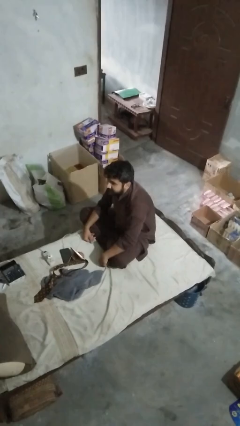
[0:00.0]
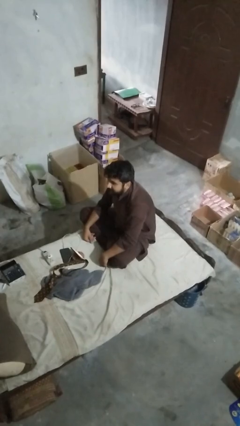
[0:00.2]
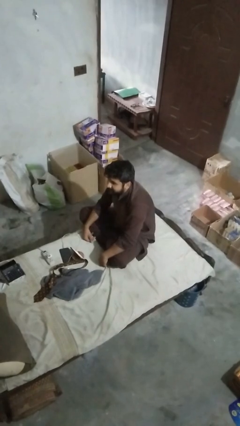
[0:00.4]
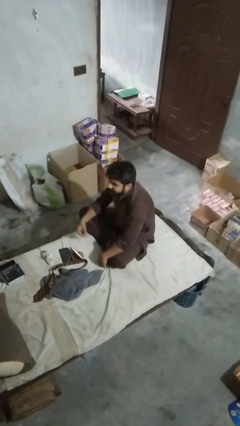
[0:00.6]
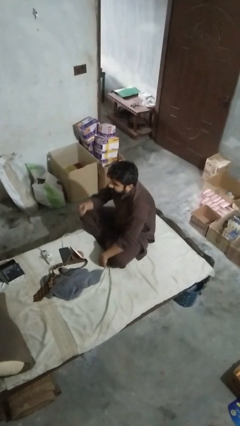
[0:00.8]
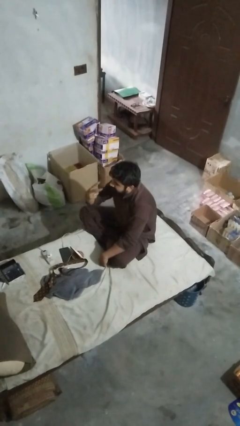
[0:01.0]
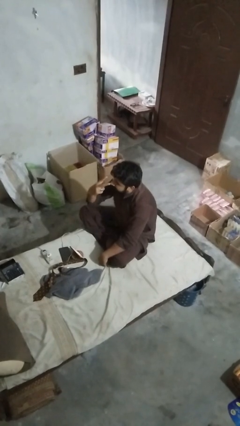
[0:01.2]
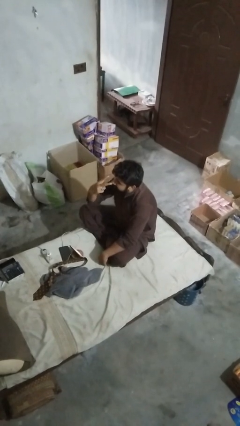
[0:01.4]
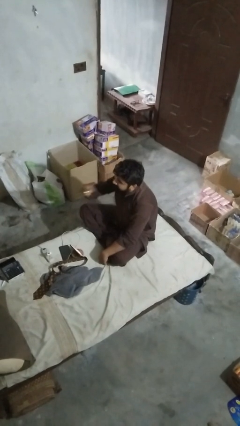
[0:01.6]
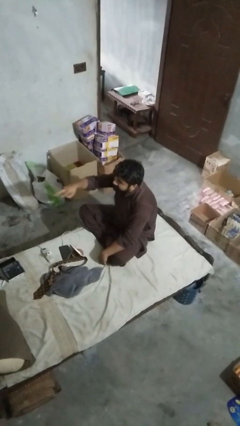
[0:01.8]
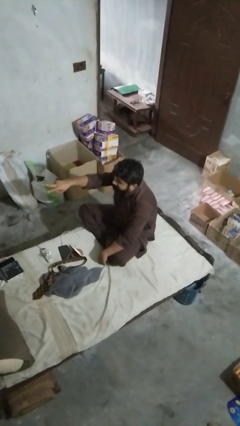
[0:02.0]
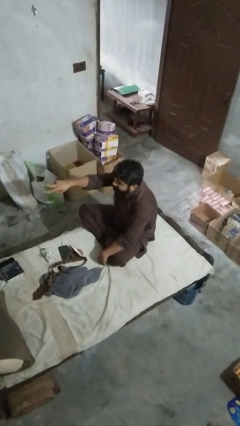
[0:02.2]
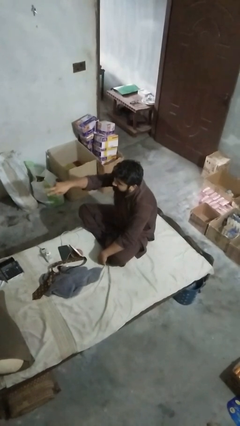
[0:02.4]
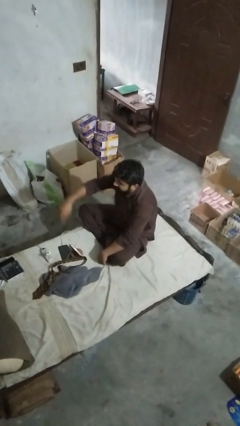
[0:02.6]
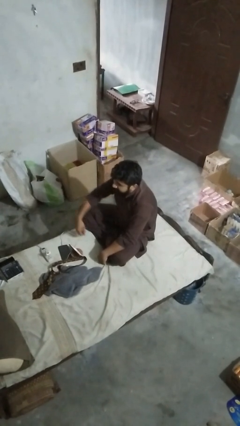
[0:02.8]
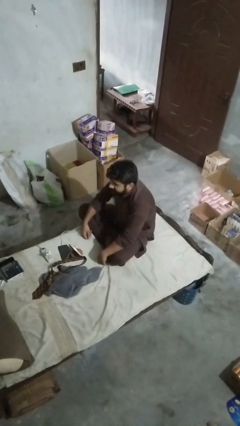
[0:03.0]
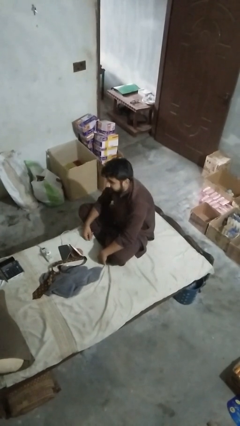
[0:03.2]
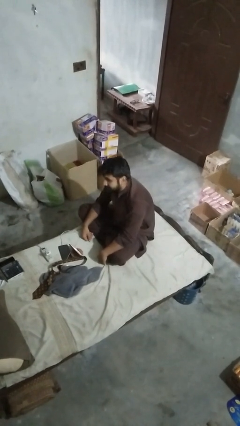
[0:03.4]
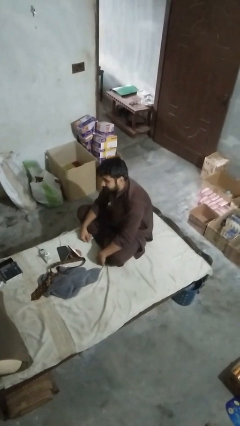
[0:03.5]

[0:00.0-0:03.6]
person gestures watch closely

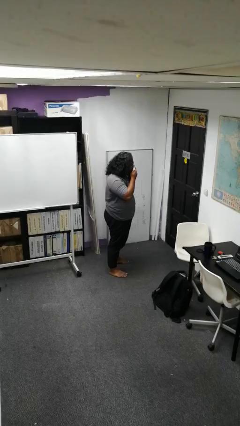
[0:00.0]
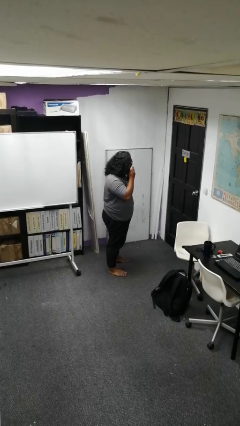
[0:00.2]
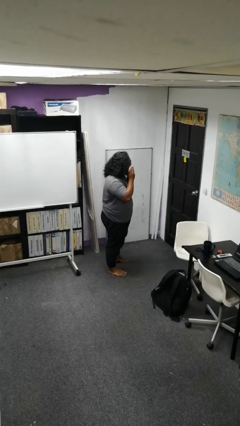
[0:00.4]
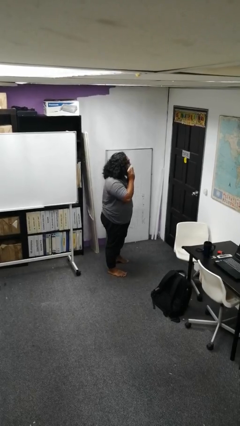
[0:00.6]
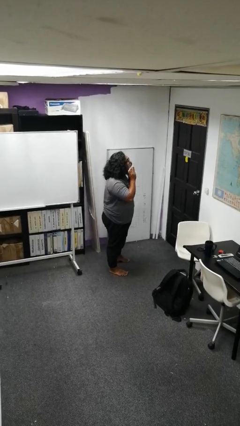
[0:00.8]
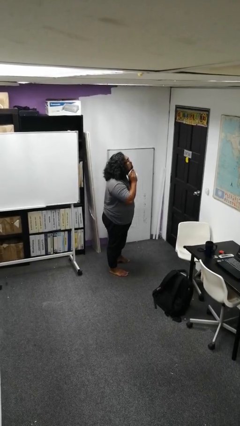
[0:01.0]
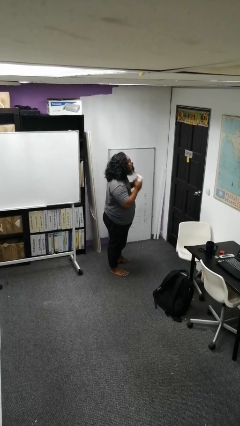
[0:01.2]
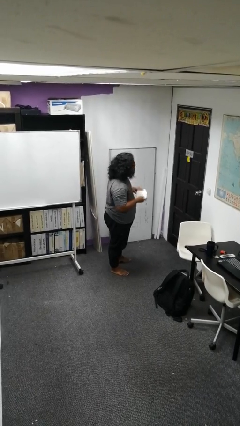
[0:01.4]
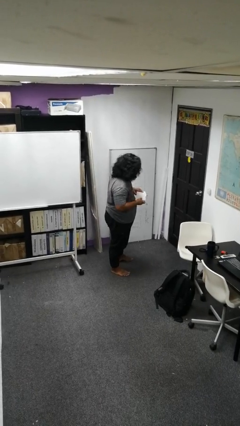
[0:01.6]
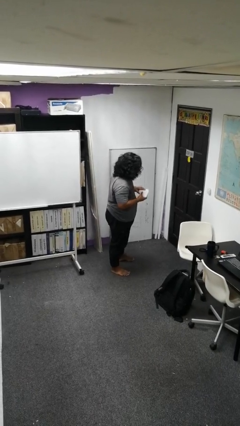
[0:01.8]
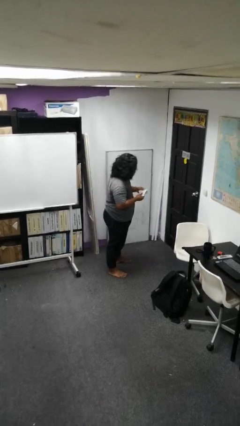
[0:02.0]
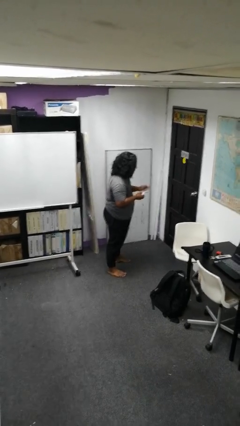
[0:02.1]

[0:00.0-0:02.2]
person wipes mouth with napkin

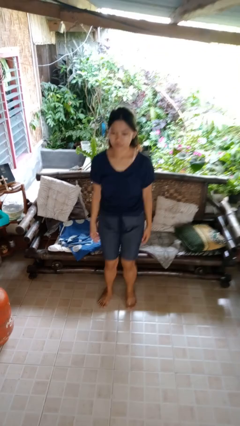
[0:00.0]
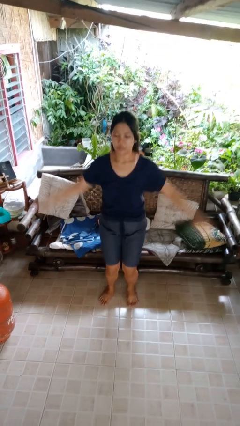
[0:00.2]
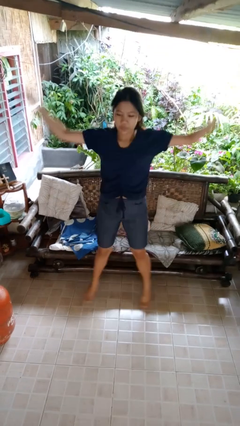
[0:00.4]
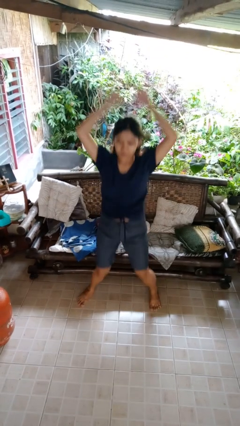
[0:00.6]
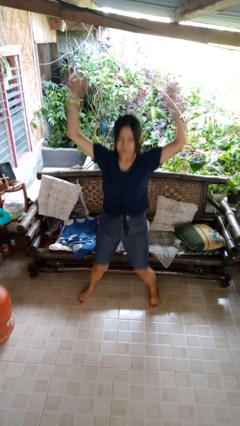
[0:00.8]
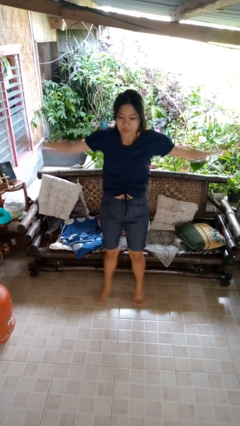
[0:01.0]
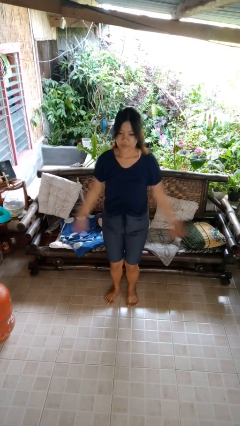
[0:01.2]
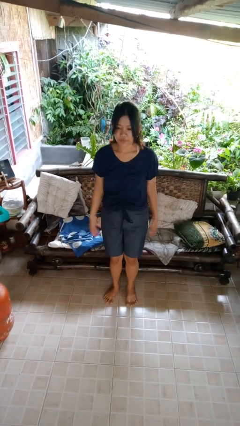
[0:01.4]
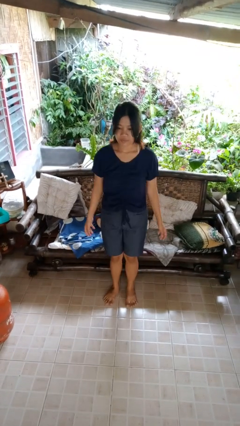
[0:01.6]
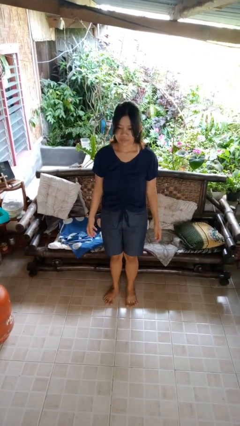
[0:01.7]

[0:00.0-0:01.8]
person exercises with jumping jacks

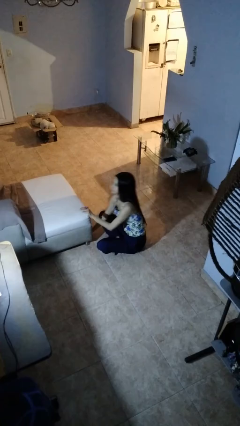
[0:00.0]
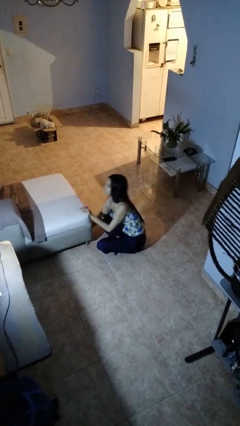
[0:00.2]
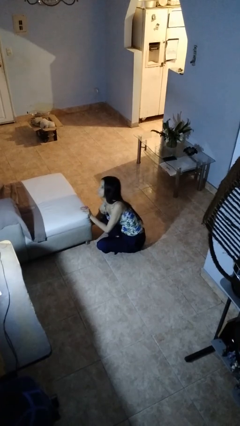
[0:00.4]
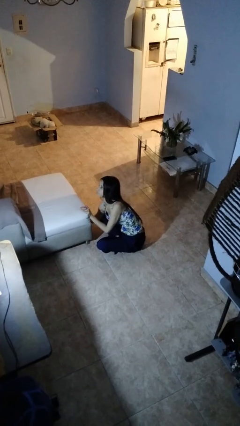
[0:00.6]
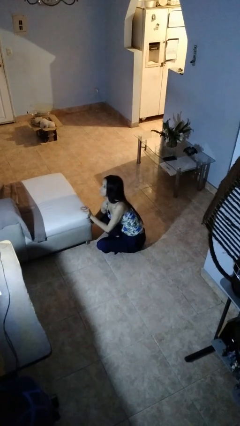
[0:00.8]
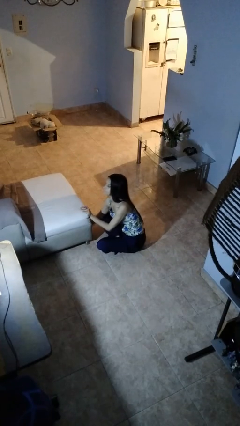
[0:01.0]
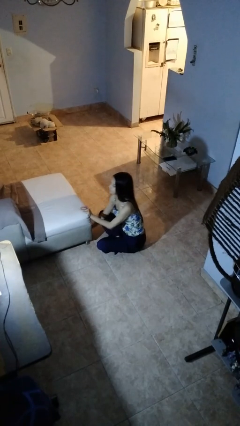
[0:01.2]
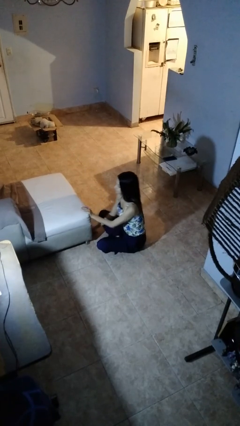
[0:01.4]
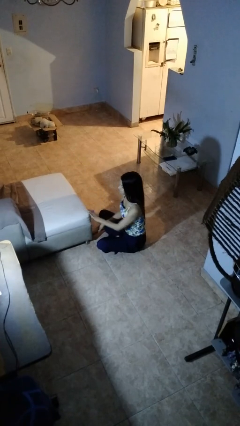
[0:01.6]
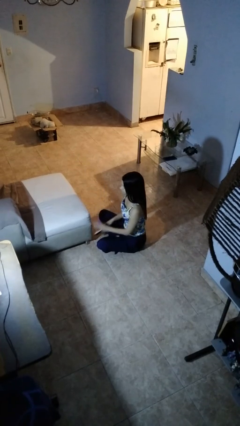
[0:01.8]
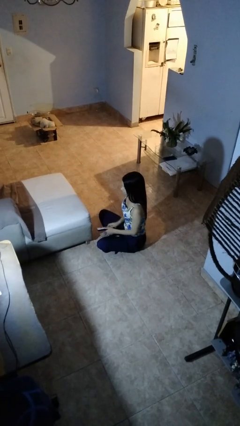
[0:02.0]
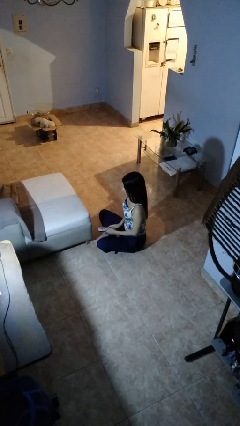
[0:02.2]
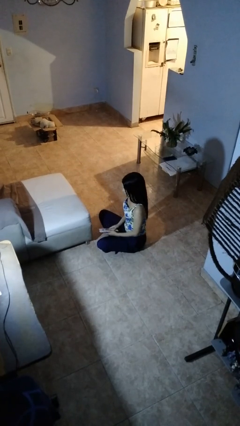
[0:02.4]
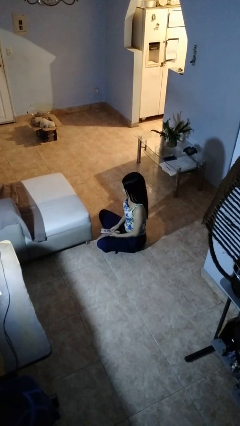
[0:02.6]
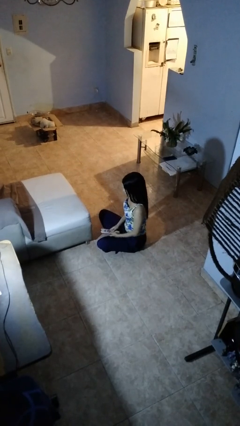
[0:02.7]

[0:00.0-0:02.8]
person searches under couch

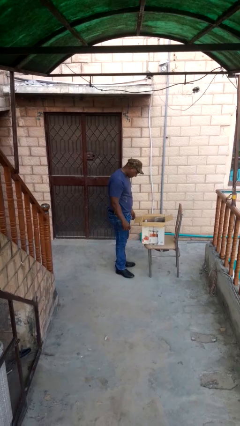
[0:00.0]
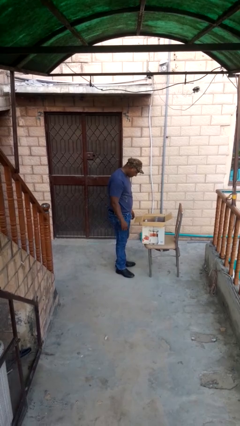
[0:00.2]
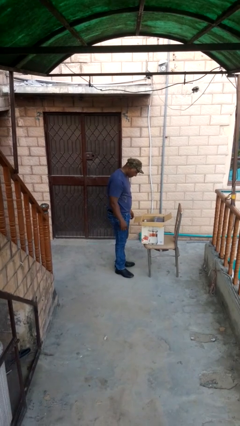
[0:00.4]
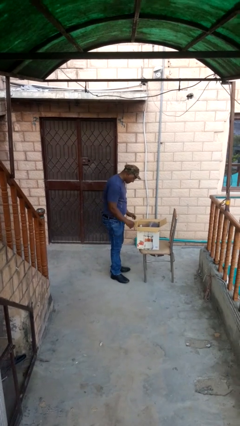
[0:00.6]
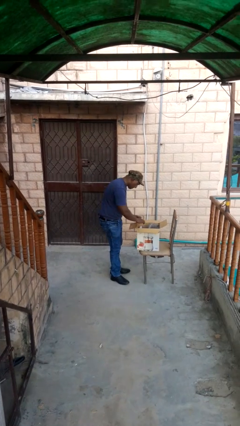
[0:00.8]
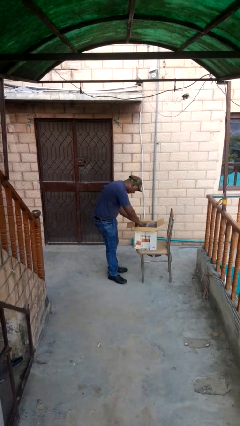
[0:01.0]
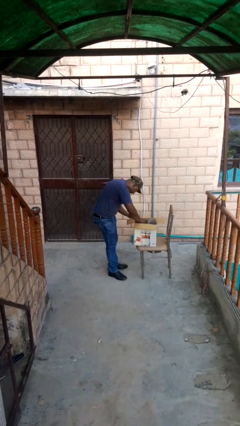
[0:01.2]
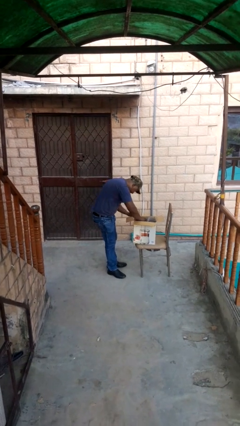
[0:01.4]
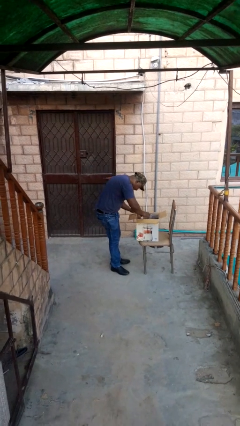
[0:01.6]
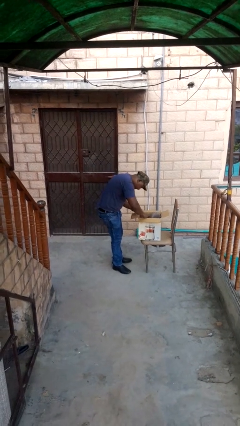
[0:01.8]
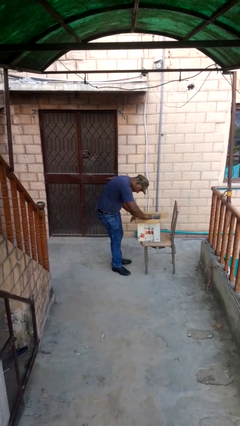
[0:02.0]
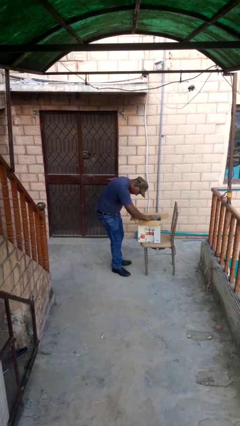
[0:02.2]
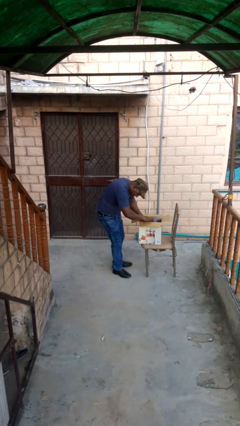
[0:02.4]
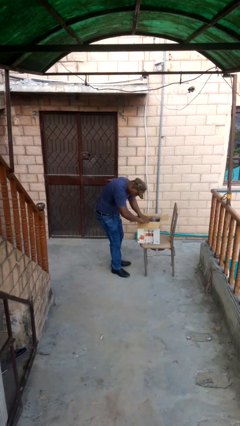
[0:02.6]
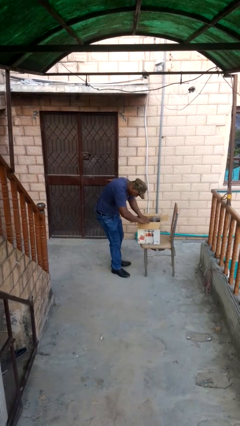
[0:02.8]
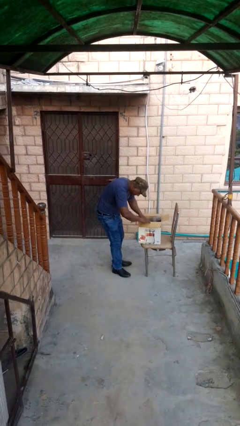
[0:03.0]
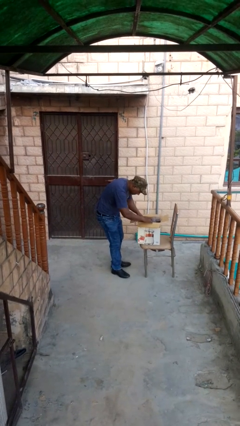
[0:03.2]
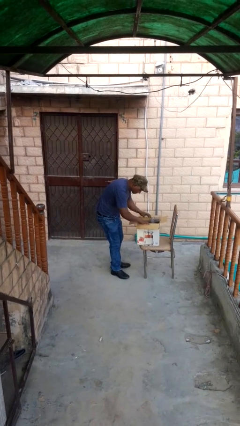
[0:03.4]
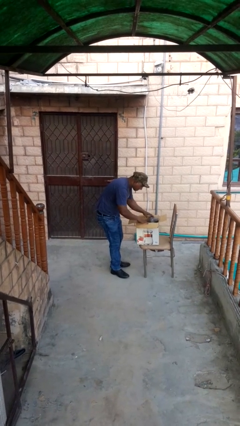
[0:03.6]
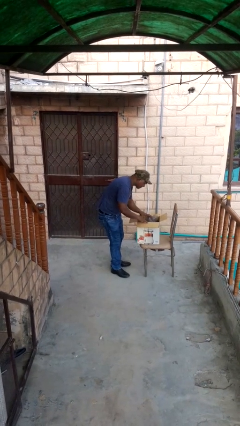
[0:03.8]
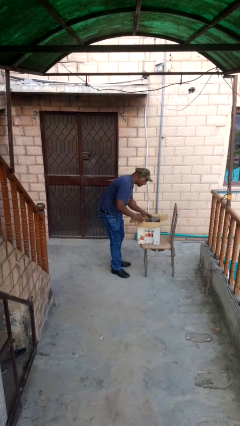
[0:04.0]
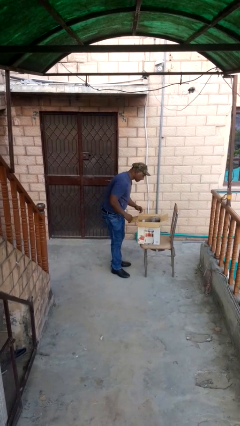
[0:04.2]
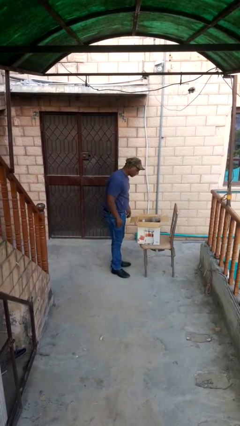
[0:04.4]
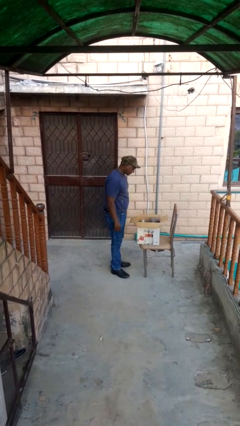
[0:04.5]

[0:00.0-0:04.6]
person searches in box

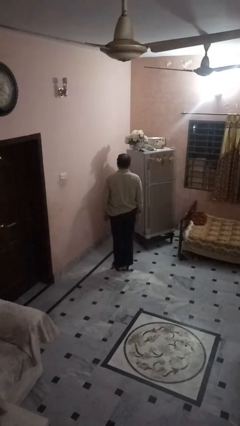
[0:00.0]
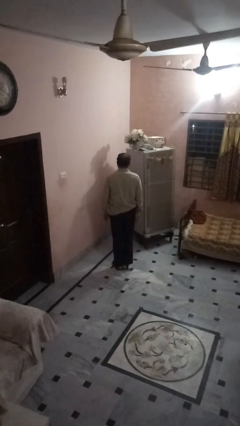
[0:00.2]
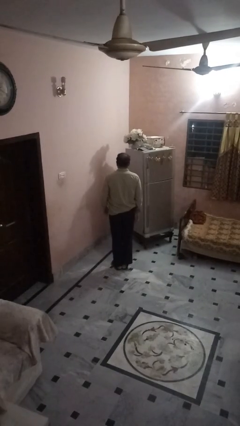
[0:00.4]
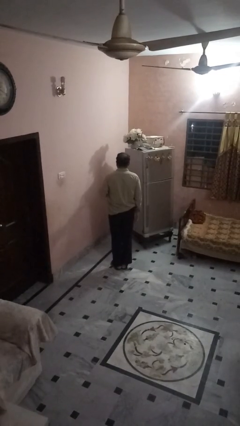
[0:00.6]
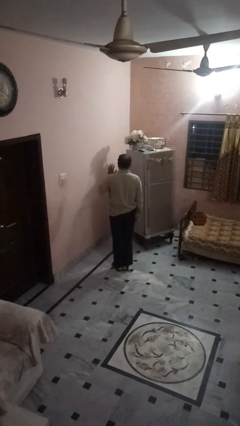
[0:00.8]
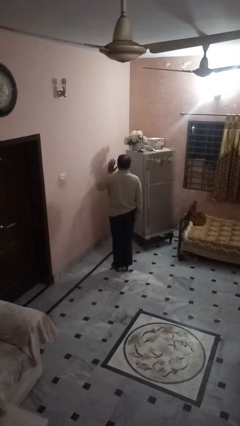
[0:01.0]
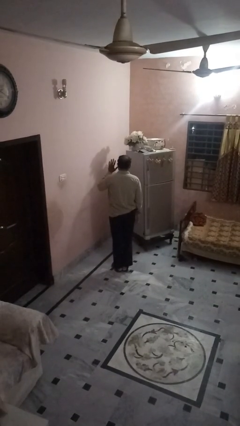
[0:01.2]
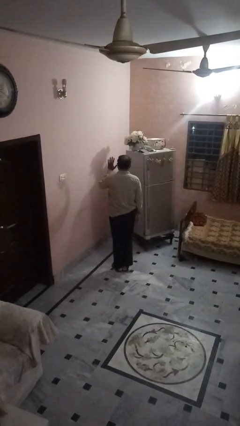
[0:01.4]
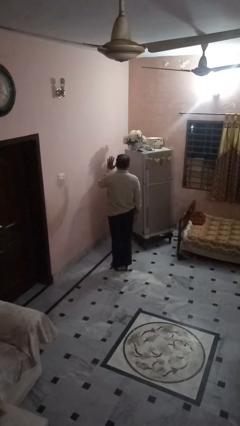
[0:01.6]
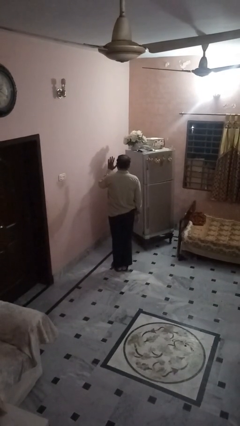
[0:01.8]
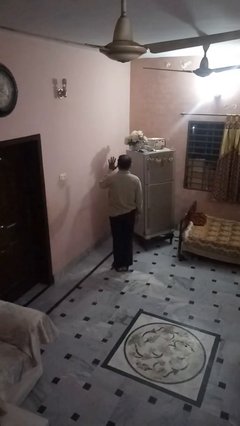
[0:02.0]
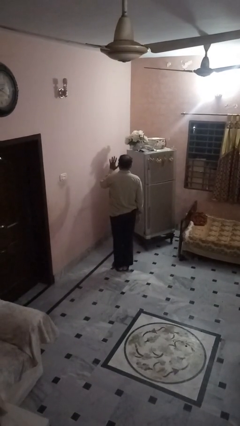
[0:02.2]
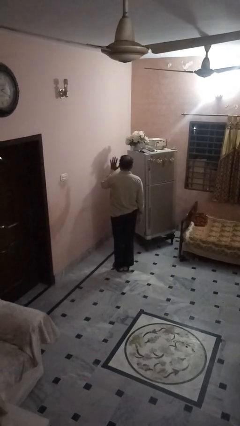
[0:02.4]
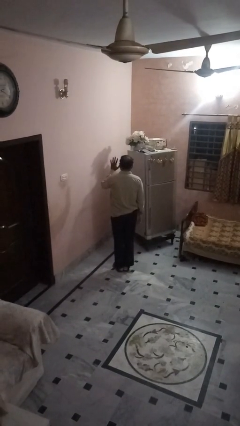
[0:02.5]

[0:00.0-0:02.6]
person gestures number five
